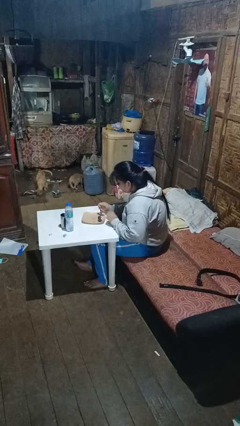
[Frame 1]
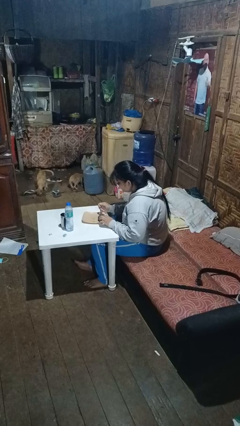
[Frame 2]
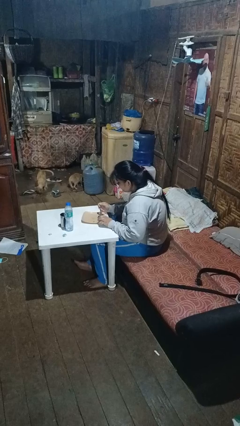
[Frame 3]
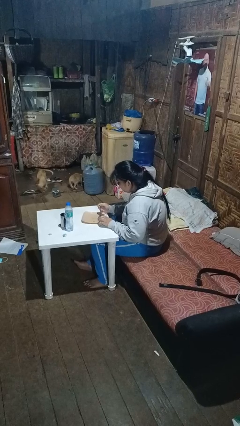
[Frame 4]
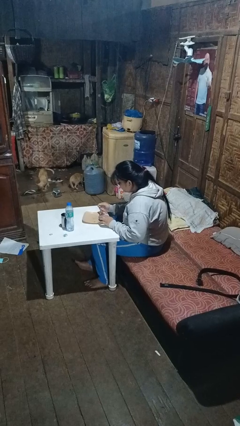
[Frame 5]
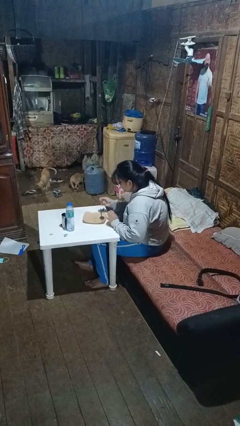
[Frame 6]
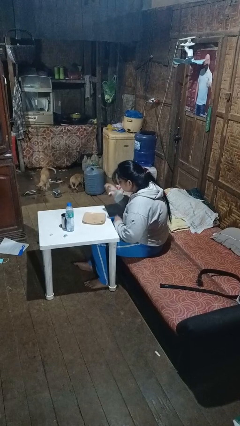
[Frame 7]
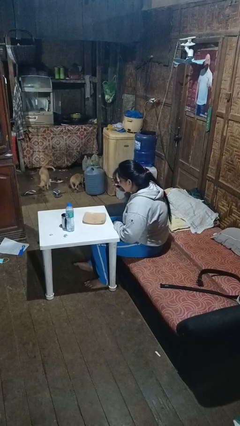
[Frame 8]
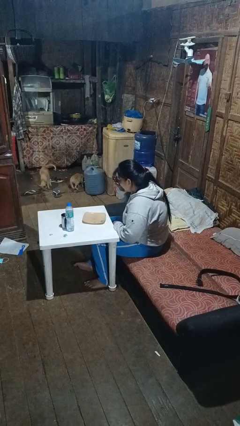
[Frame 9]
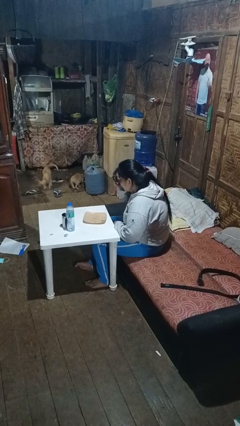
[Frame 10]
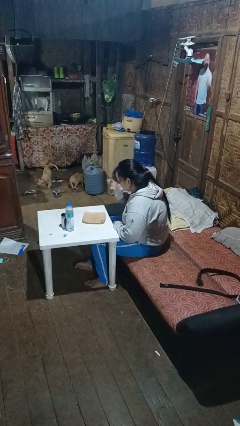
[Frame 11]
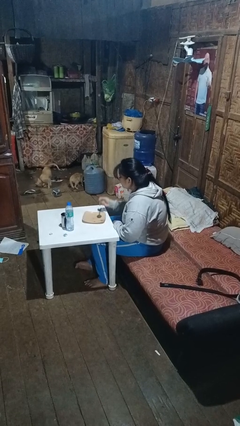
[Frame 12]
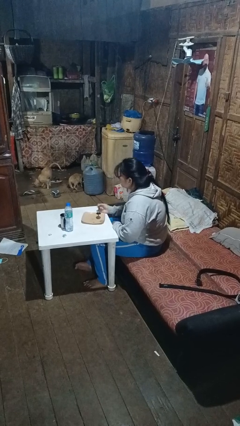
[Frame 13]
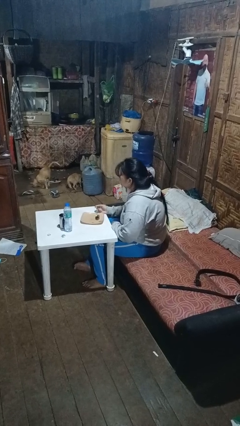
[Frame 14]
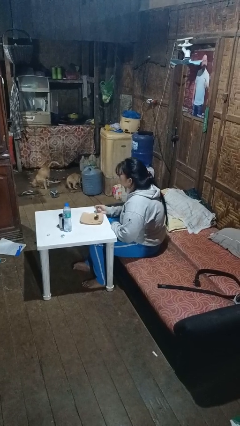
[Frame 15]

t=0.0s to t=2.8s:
person eats with utensil

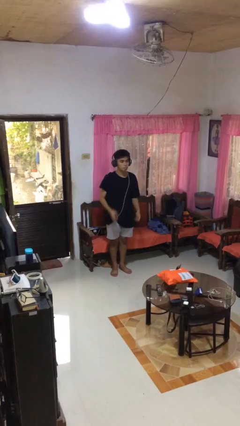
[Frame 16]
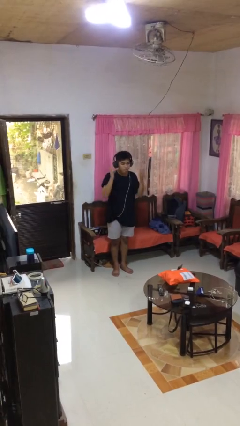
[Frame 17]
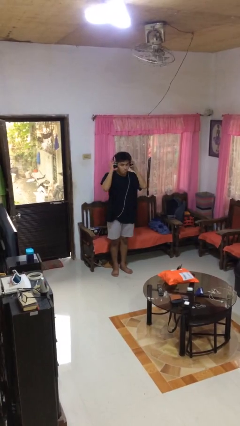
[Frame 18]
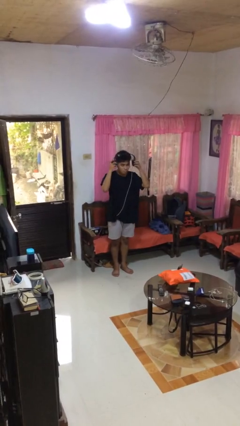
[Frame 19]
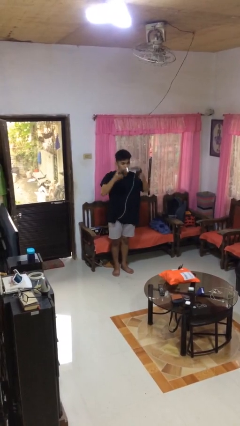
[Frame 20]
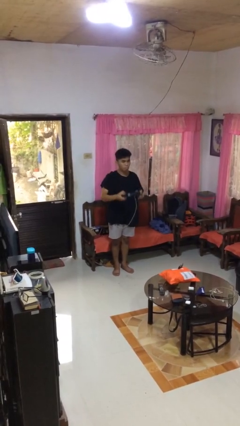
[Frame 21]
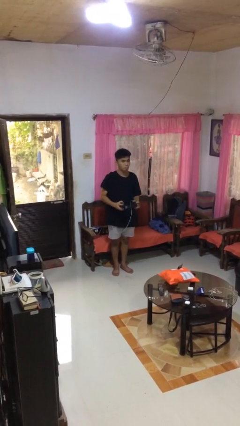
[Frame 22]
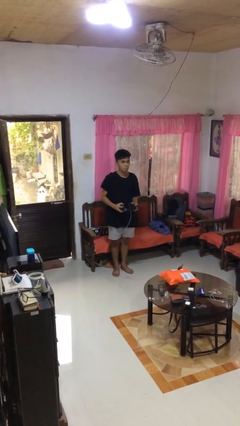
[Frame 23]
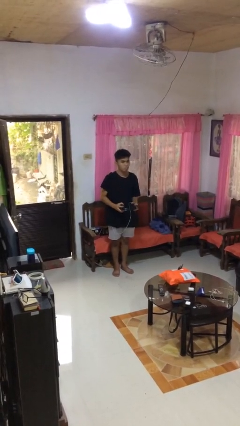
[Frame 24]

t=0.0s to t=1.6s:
person takes off headphones

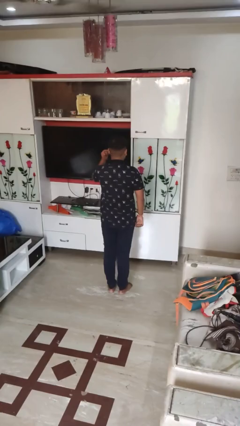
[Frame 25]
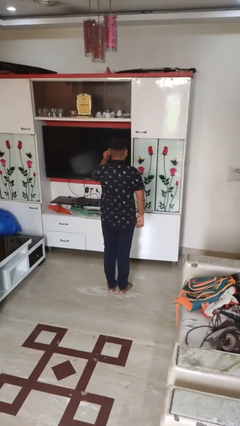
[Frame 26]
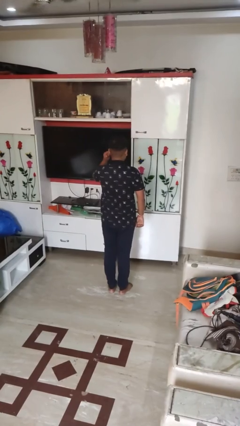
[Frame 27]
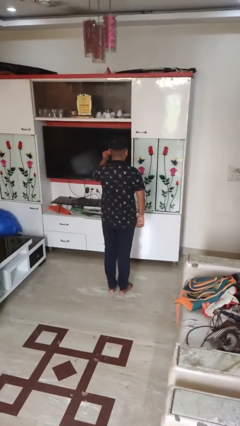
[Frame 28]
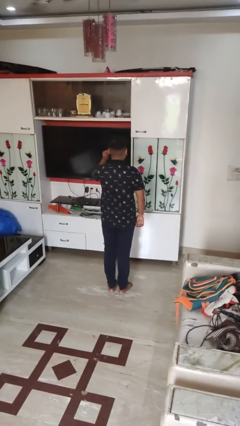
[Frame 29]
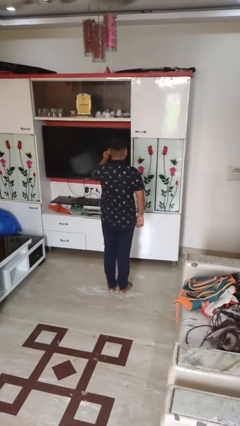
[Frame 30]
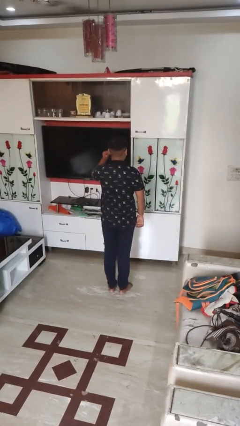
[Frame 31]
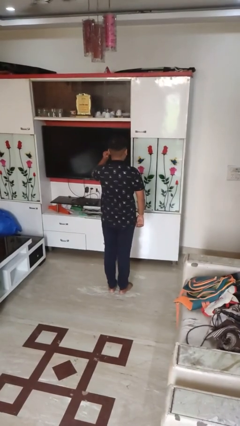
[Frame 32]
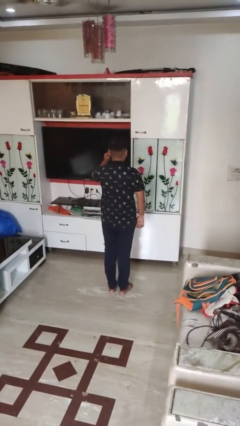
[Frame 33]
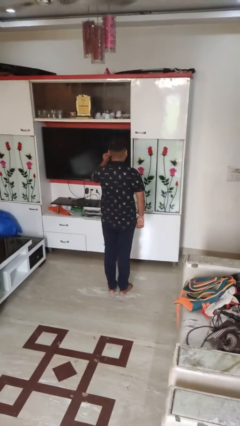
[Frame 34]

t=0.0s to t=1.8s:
person gestures listen closely

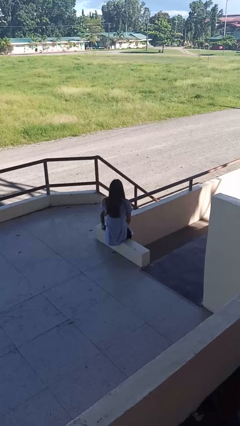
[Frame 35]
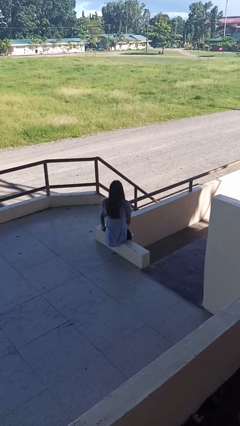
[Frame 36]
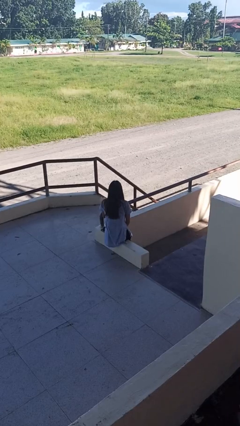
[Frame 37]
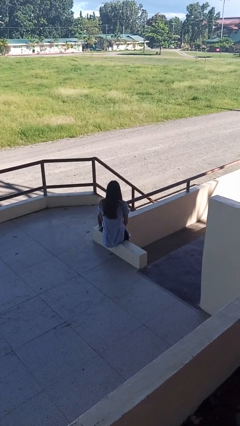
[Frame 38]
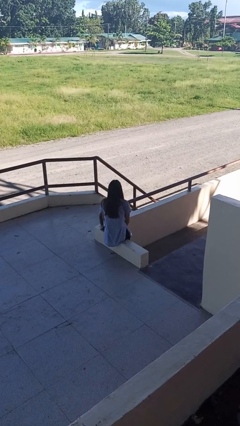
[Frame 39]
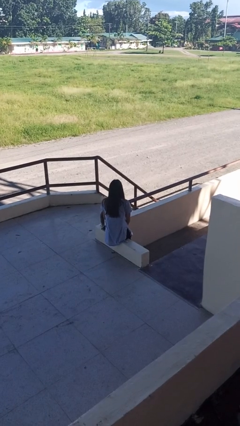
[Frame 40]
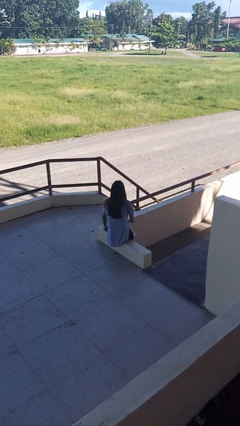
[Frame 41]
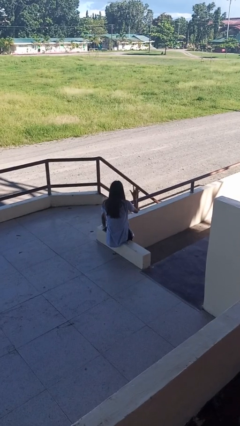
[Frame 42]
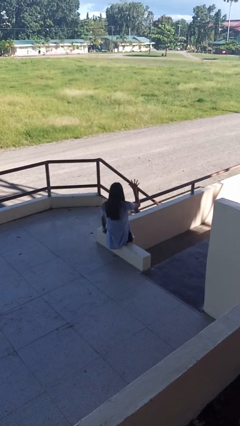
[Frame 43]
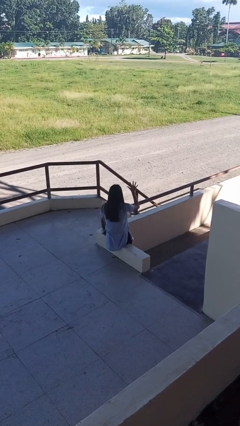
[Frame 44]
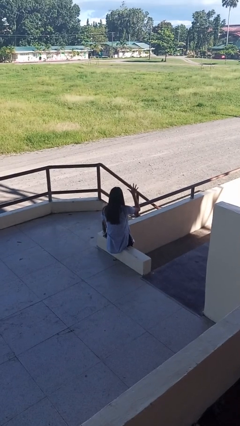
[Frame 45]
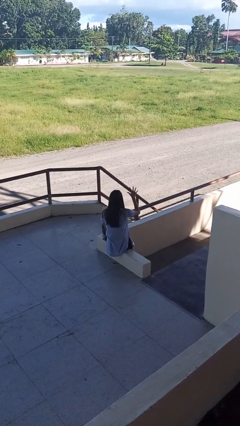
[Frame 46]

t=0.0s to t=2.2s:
person gestures number five

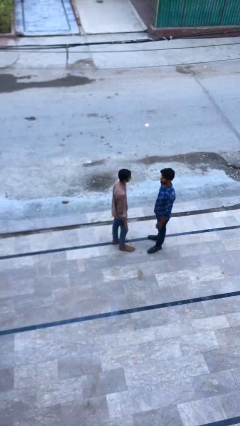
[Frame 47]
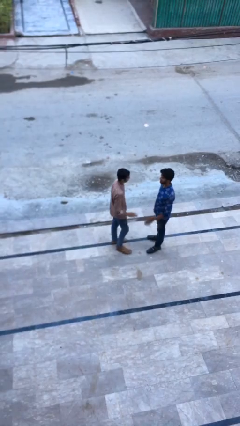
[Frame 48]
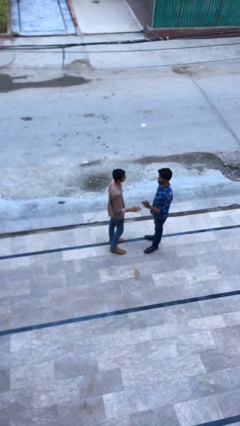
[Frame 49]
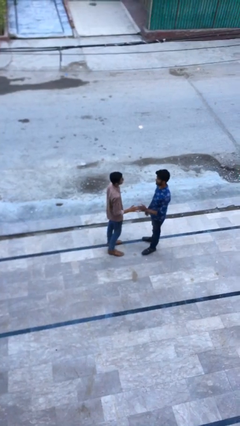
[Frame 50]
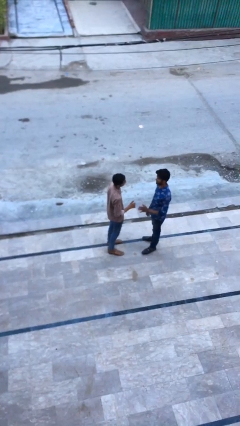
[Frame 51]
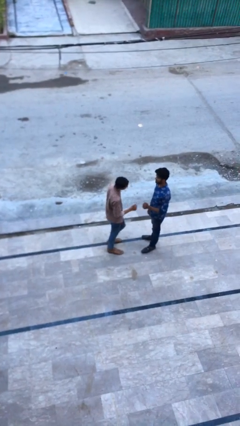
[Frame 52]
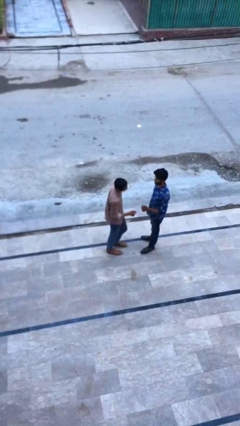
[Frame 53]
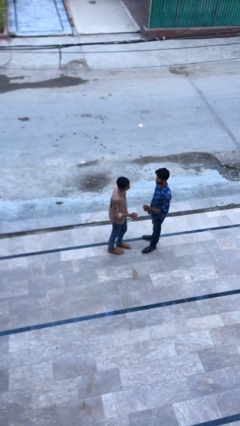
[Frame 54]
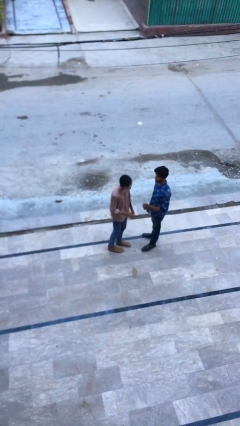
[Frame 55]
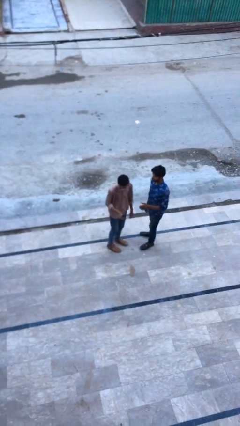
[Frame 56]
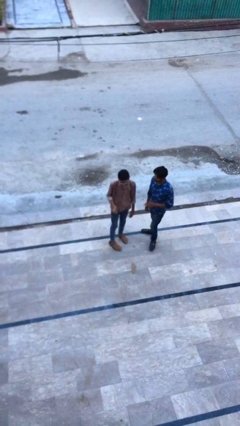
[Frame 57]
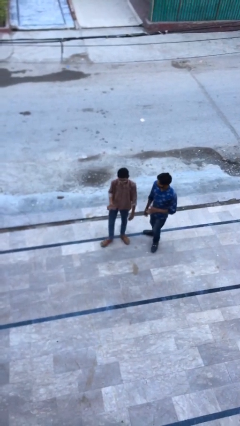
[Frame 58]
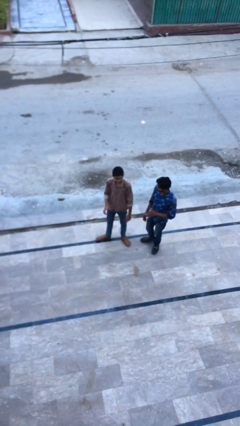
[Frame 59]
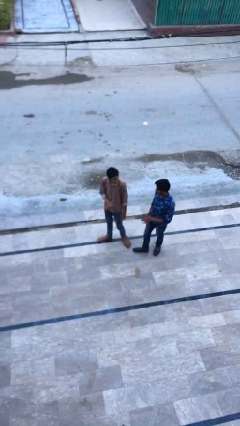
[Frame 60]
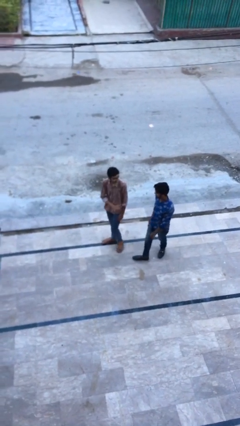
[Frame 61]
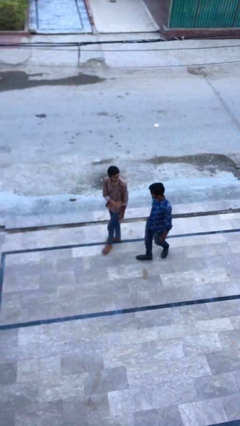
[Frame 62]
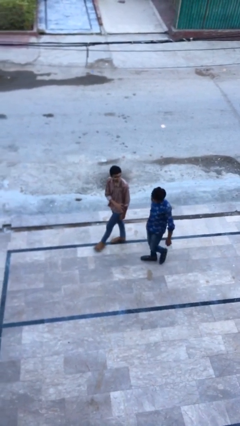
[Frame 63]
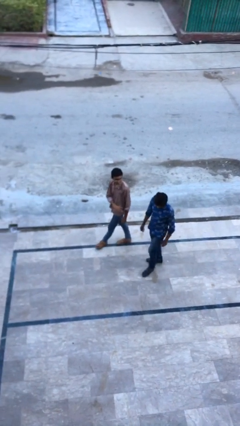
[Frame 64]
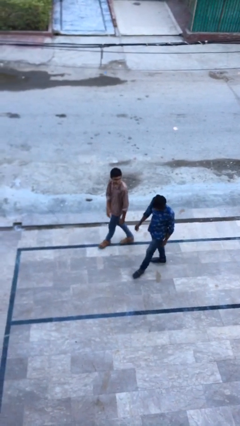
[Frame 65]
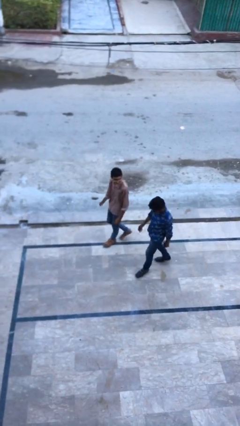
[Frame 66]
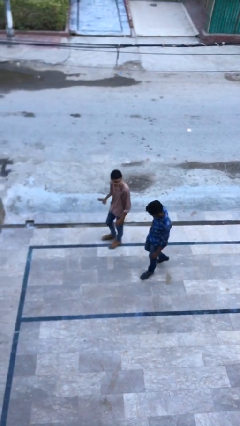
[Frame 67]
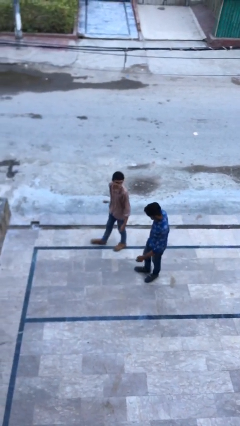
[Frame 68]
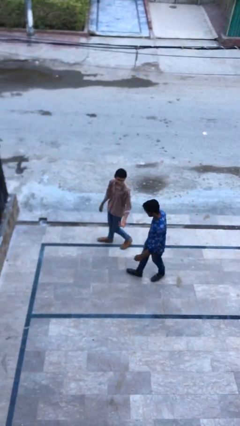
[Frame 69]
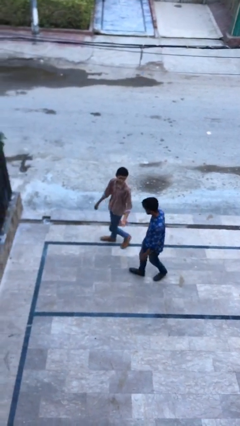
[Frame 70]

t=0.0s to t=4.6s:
person talks to person

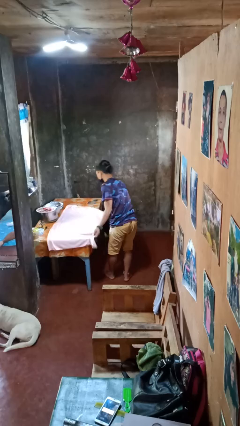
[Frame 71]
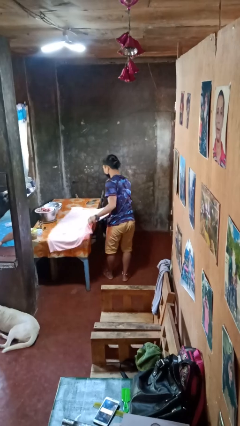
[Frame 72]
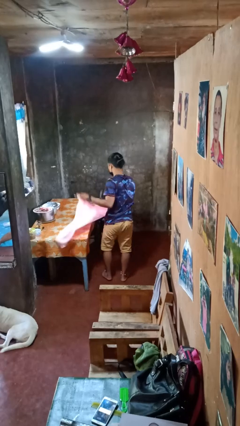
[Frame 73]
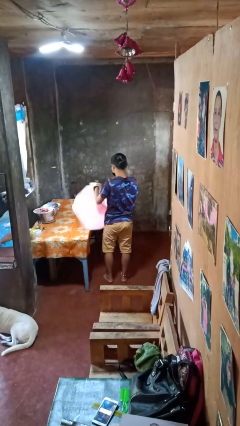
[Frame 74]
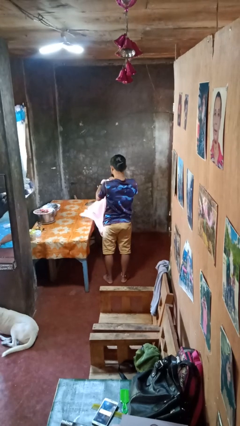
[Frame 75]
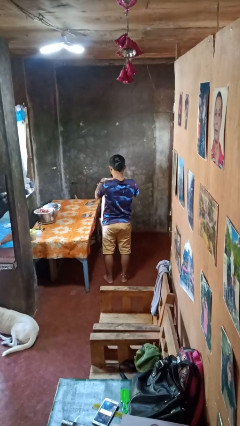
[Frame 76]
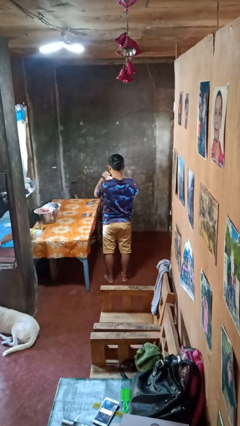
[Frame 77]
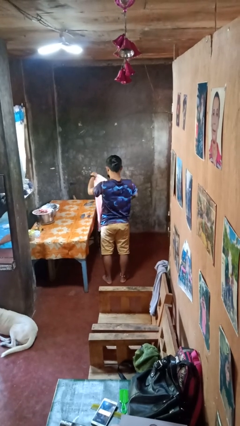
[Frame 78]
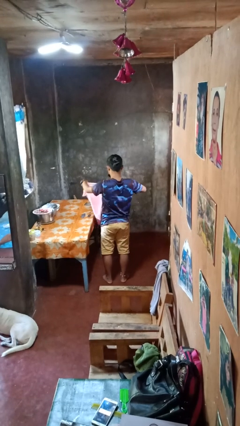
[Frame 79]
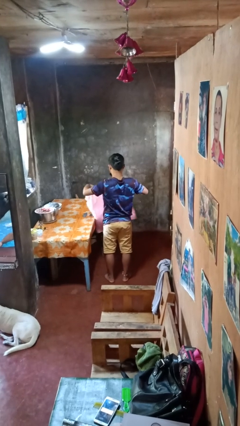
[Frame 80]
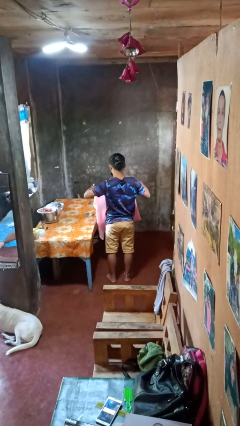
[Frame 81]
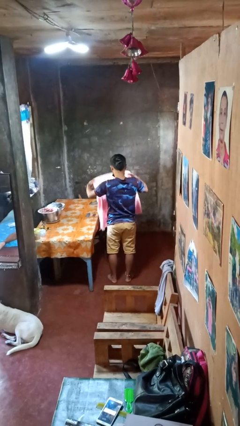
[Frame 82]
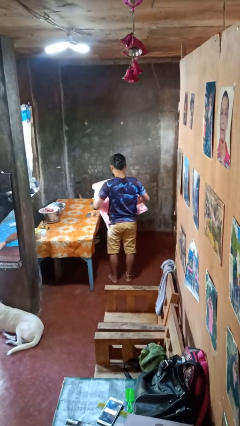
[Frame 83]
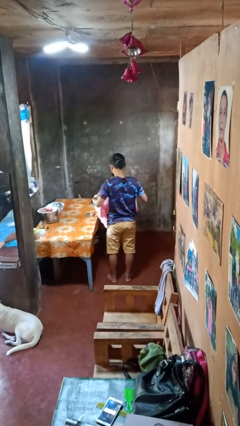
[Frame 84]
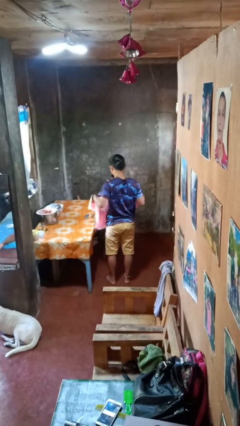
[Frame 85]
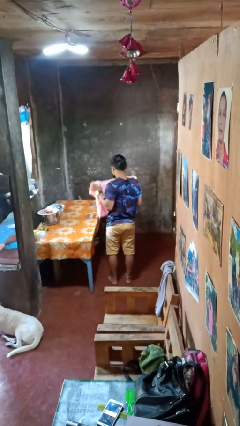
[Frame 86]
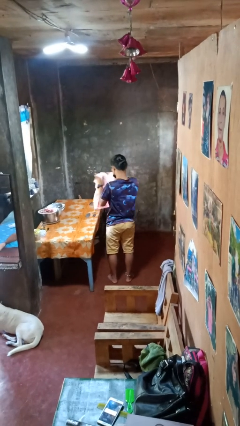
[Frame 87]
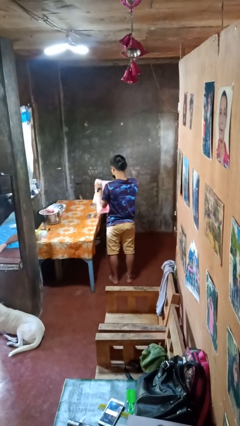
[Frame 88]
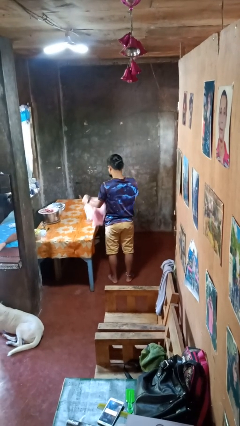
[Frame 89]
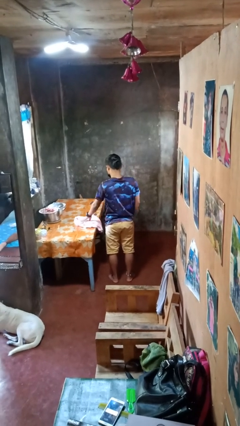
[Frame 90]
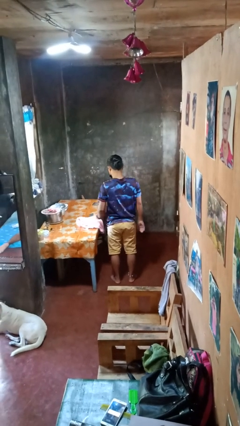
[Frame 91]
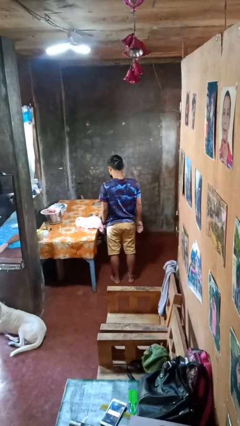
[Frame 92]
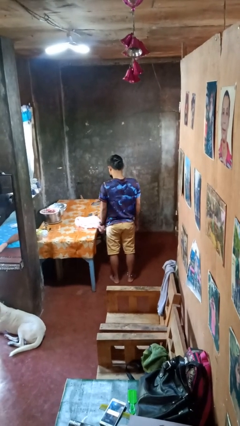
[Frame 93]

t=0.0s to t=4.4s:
person folds tablecloth

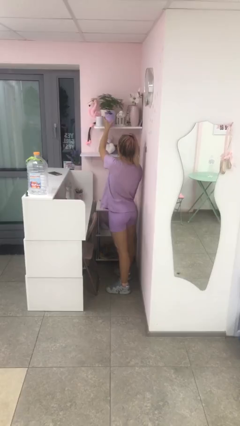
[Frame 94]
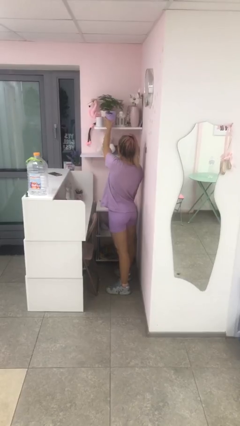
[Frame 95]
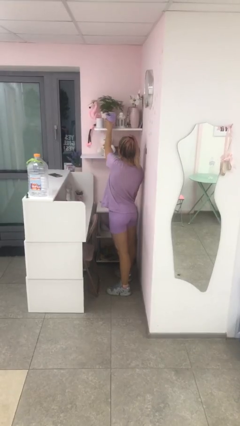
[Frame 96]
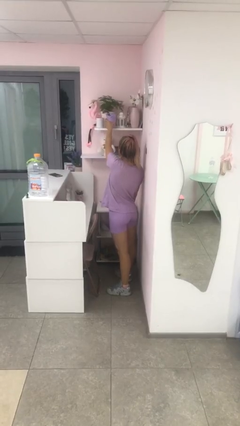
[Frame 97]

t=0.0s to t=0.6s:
person puts down object into cabinet
